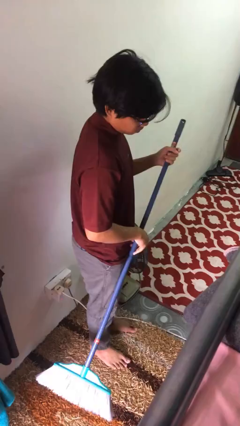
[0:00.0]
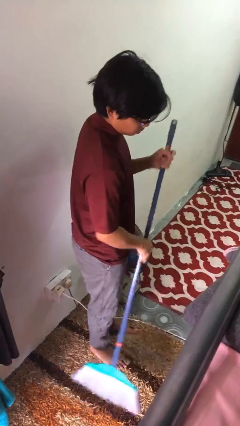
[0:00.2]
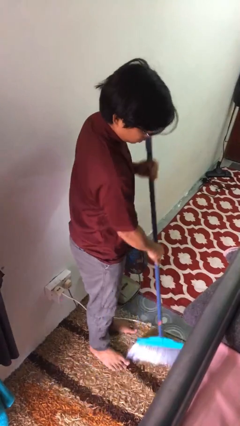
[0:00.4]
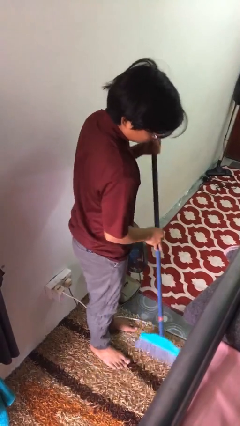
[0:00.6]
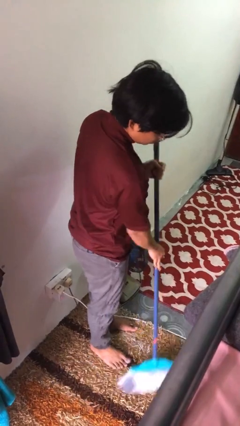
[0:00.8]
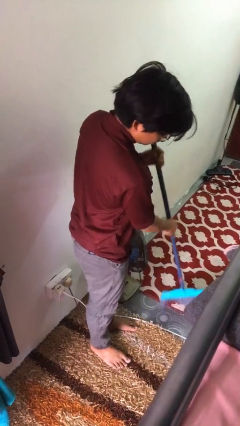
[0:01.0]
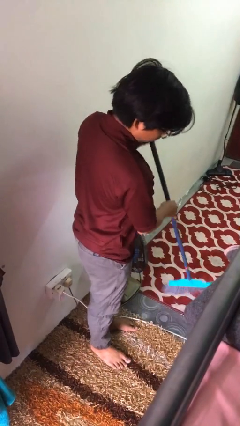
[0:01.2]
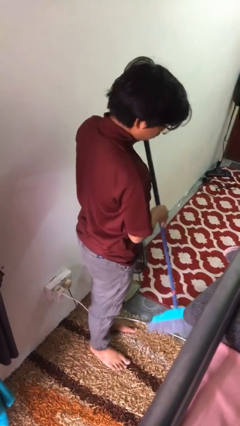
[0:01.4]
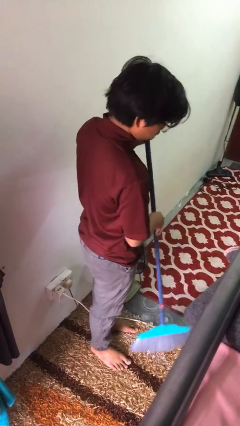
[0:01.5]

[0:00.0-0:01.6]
person sweeps floor

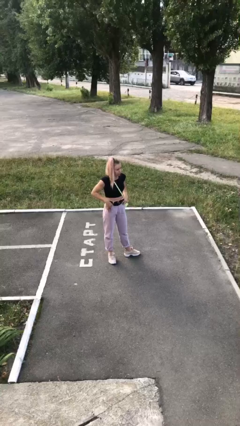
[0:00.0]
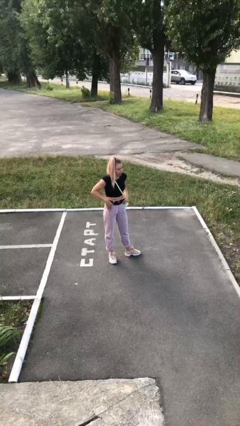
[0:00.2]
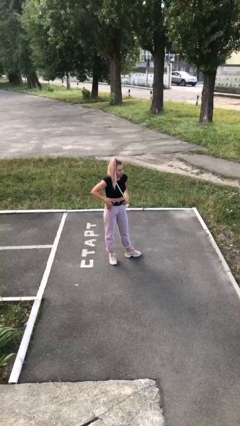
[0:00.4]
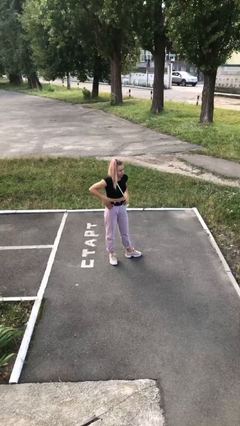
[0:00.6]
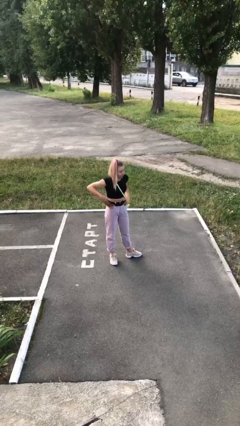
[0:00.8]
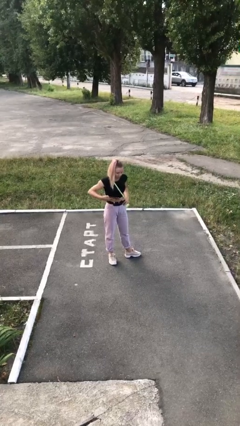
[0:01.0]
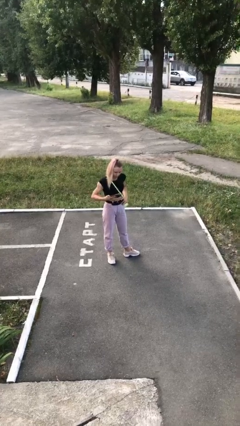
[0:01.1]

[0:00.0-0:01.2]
person takes phone from pocket

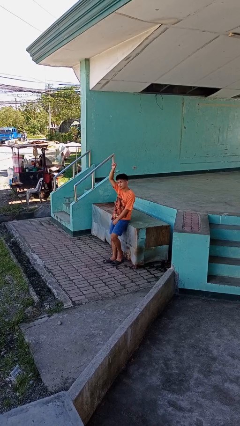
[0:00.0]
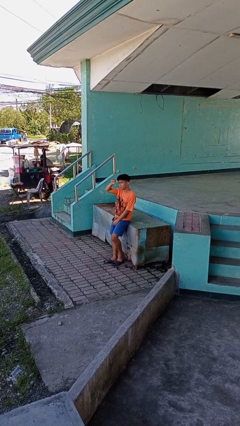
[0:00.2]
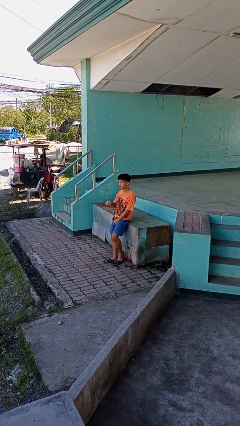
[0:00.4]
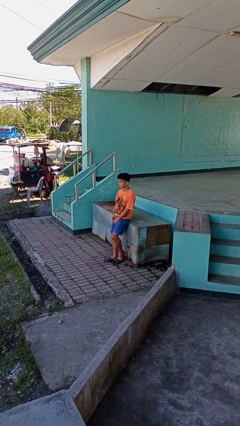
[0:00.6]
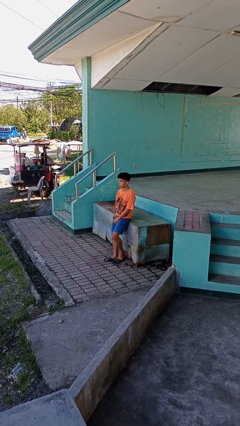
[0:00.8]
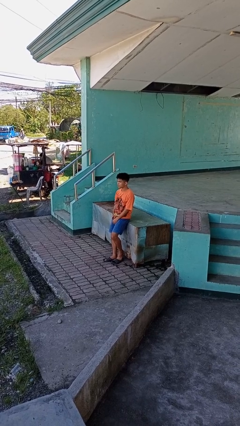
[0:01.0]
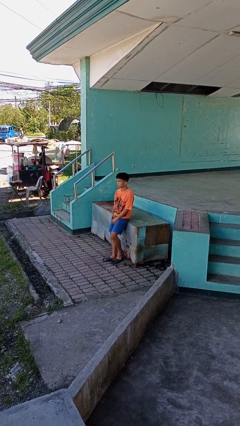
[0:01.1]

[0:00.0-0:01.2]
person gestures lower hand

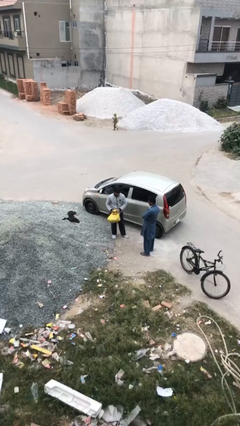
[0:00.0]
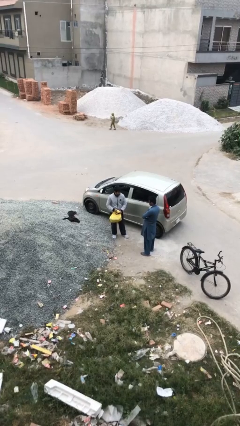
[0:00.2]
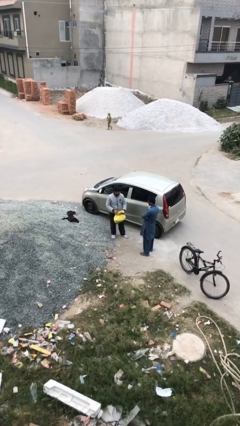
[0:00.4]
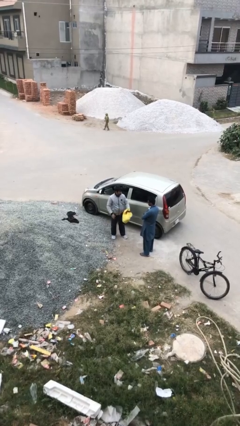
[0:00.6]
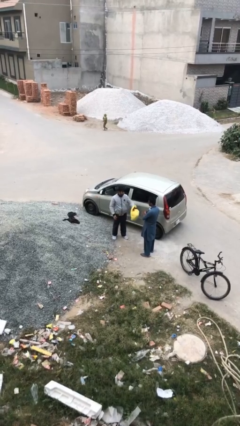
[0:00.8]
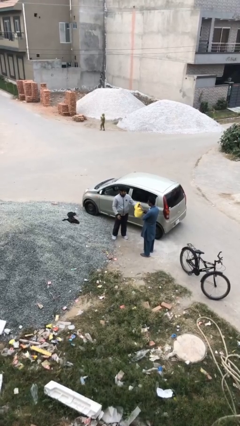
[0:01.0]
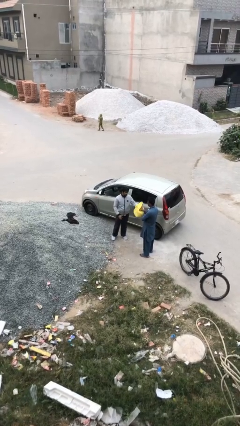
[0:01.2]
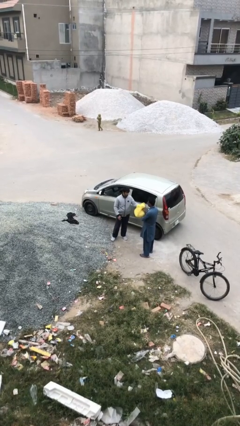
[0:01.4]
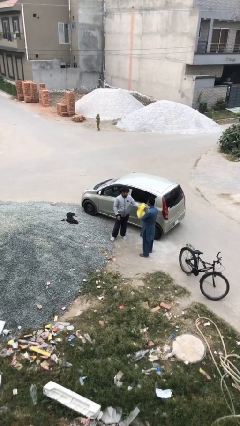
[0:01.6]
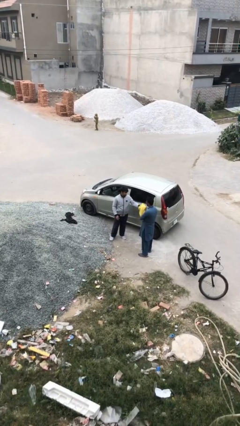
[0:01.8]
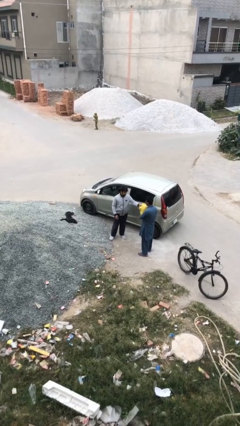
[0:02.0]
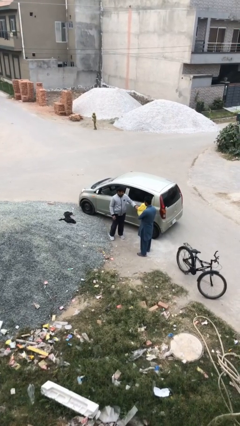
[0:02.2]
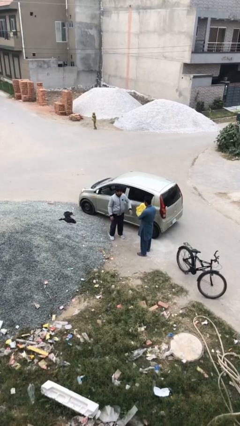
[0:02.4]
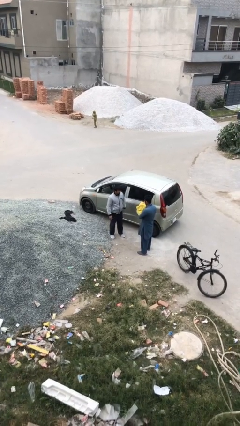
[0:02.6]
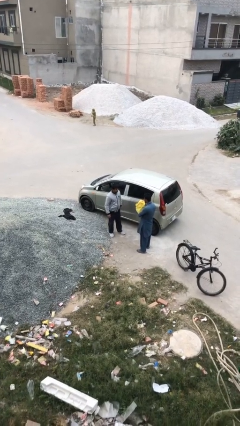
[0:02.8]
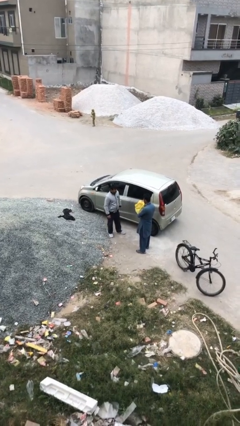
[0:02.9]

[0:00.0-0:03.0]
person transfers object to person

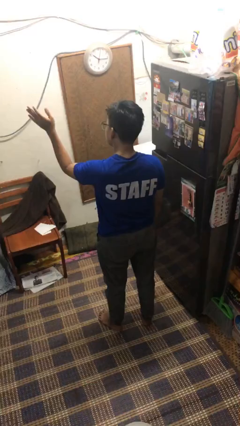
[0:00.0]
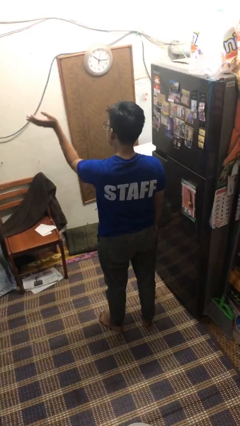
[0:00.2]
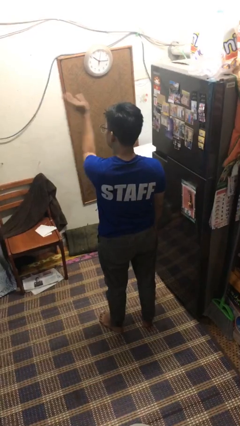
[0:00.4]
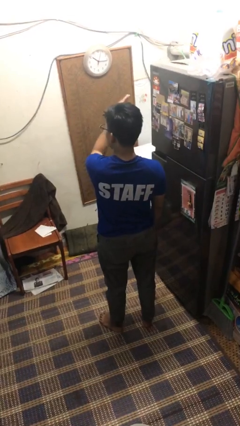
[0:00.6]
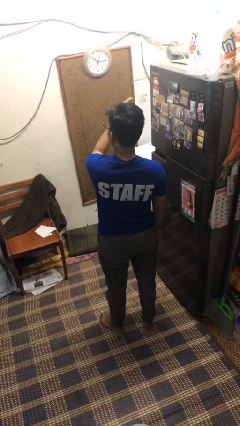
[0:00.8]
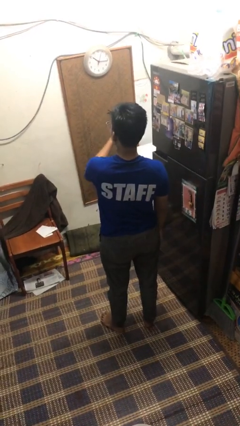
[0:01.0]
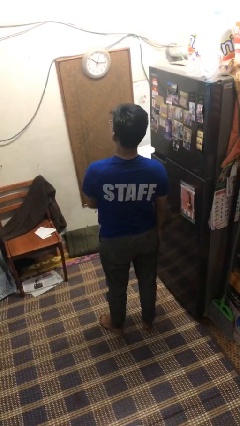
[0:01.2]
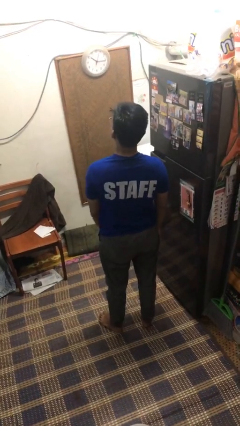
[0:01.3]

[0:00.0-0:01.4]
person gestures swipe right

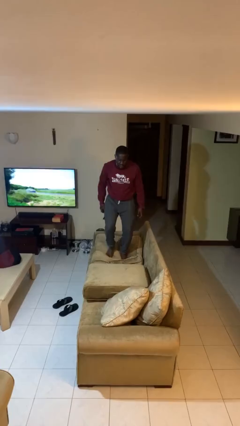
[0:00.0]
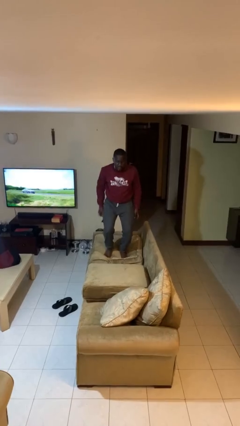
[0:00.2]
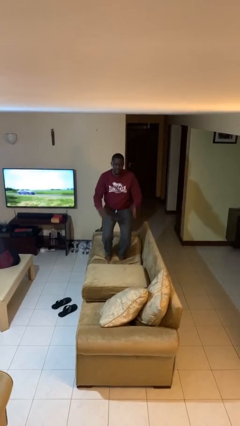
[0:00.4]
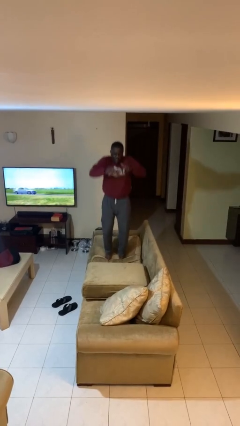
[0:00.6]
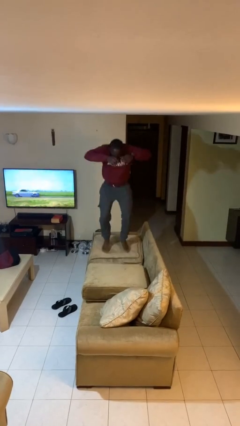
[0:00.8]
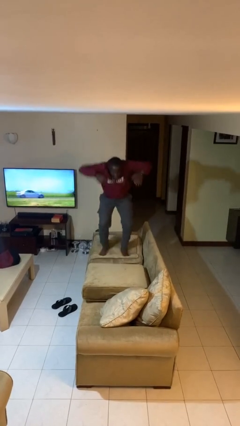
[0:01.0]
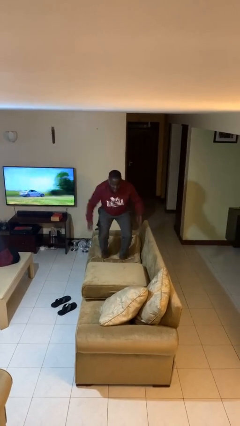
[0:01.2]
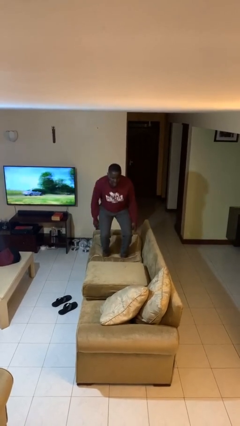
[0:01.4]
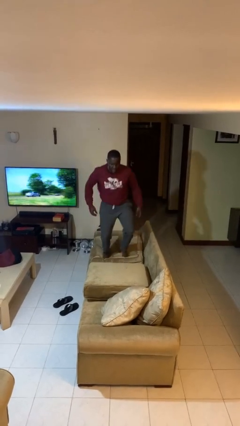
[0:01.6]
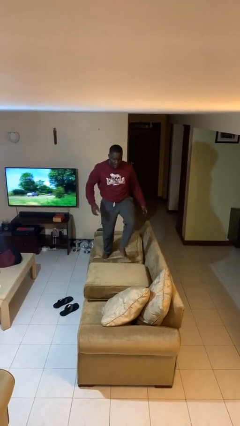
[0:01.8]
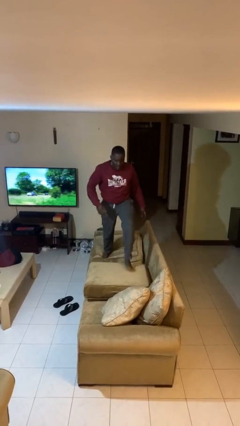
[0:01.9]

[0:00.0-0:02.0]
person jumps on couch

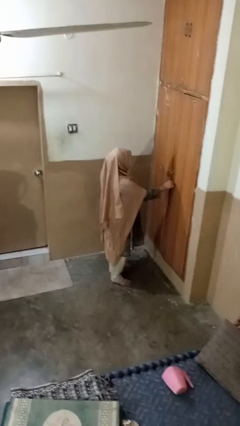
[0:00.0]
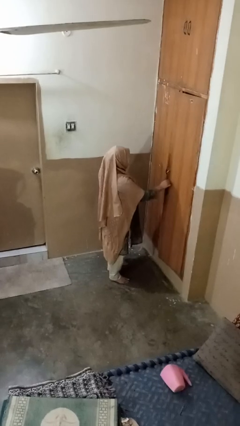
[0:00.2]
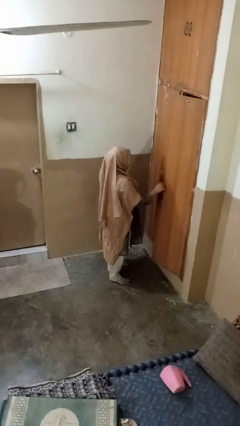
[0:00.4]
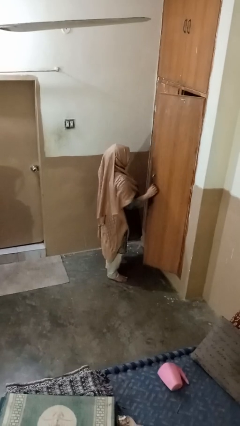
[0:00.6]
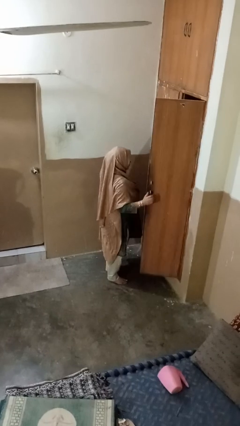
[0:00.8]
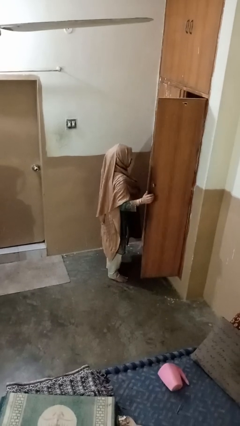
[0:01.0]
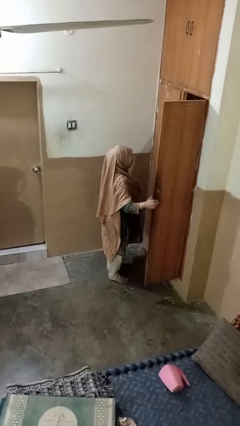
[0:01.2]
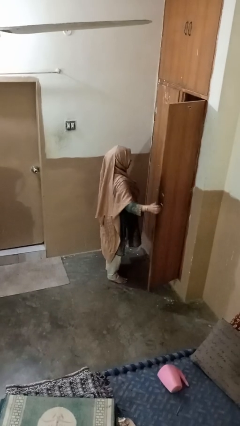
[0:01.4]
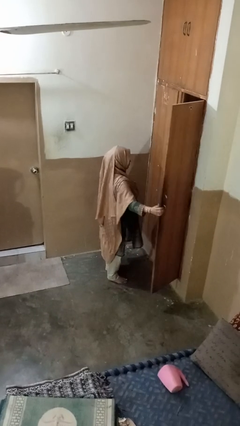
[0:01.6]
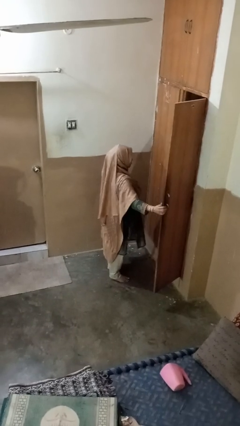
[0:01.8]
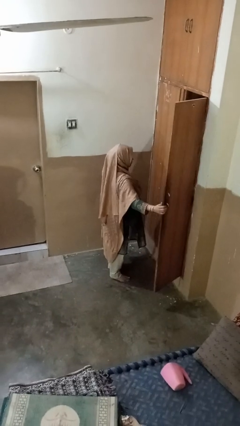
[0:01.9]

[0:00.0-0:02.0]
person opens closet door

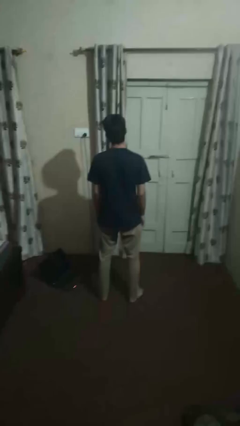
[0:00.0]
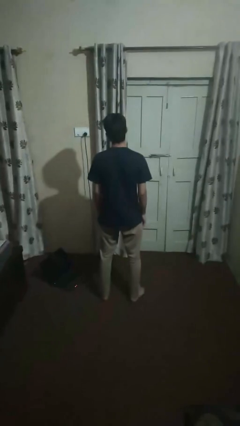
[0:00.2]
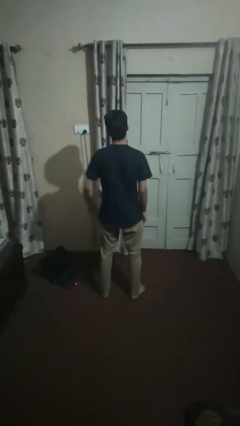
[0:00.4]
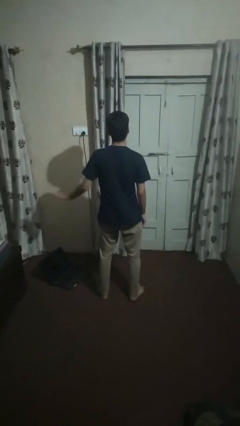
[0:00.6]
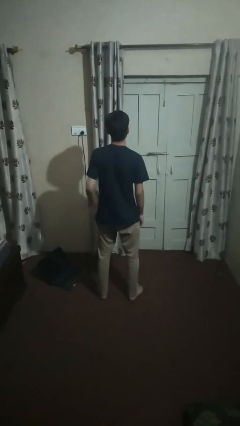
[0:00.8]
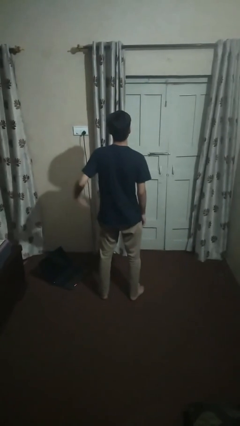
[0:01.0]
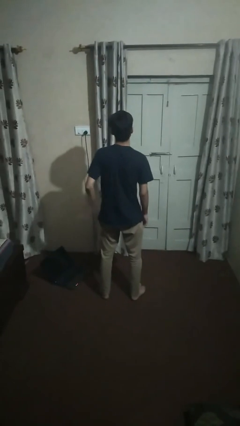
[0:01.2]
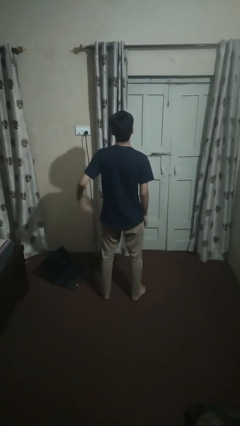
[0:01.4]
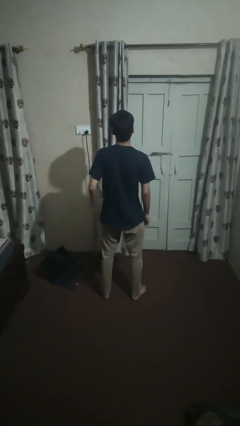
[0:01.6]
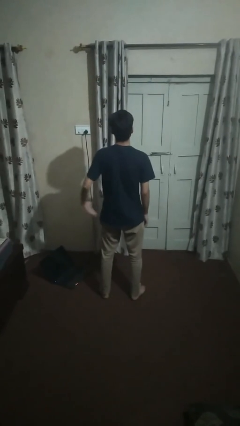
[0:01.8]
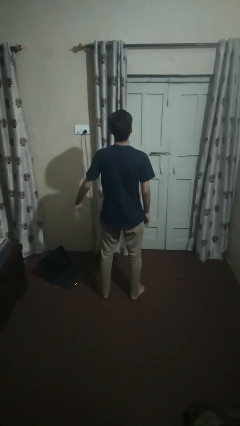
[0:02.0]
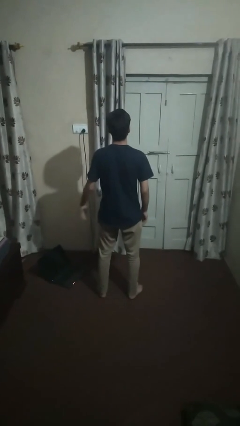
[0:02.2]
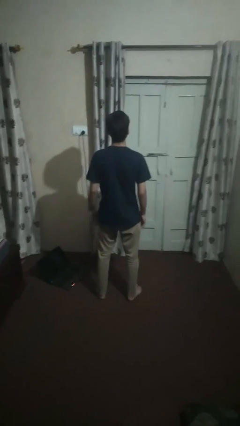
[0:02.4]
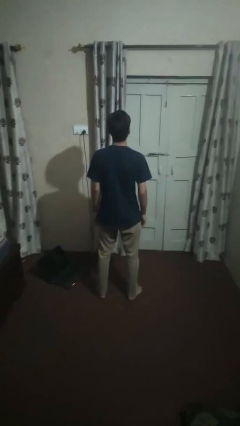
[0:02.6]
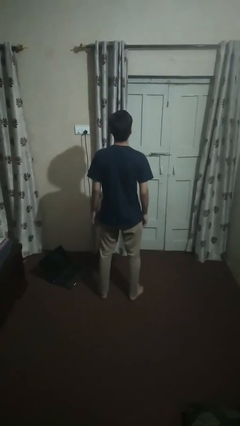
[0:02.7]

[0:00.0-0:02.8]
person slaps hands on thighs

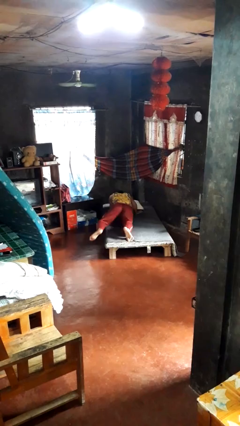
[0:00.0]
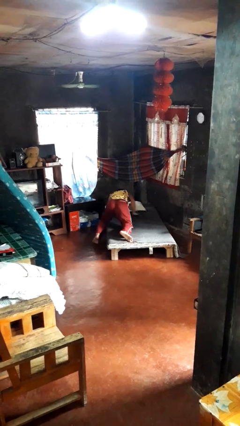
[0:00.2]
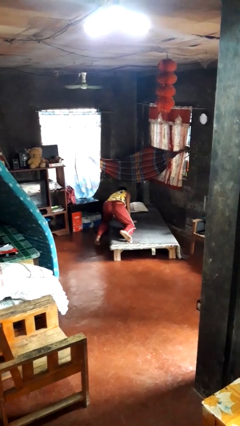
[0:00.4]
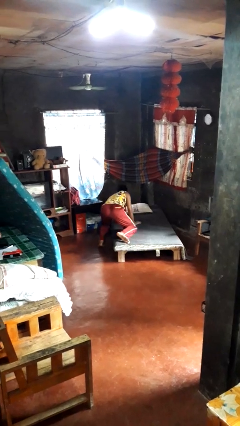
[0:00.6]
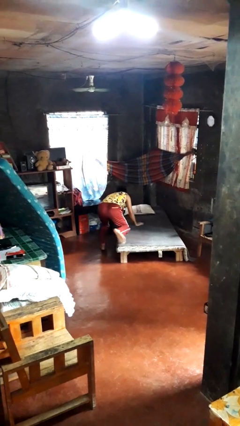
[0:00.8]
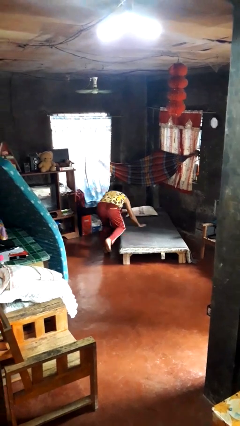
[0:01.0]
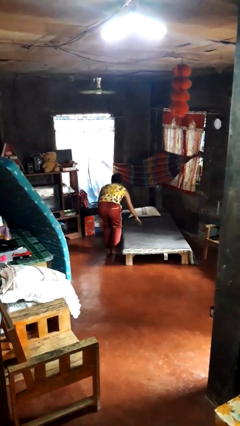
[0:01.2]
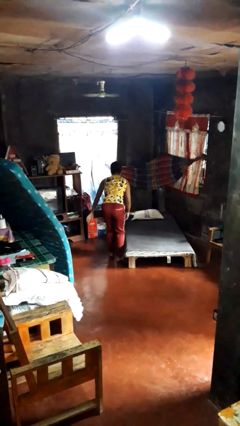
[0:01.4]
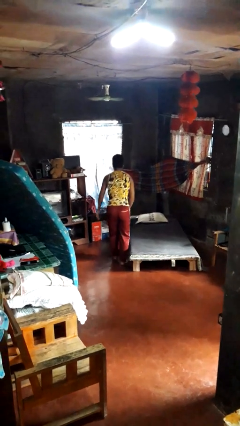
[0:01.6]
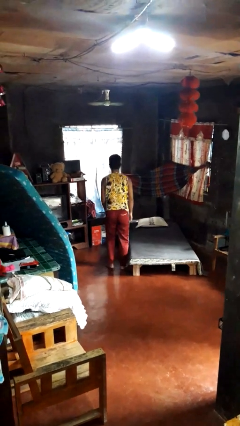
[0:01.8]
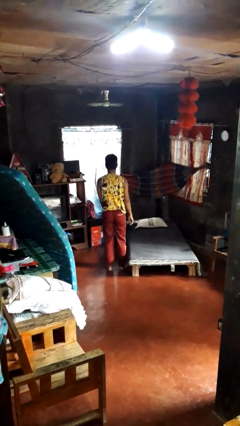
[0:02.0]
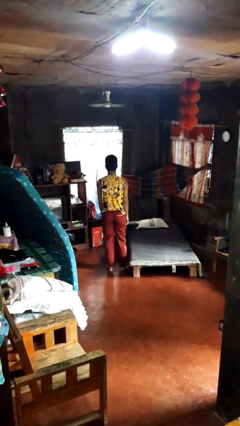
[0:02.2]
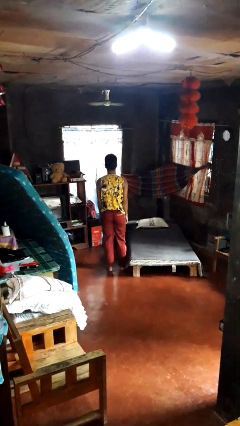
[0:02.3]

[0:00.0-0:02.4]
person stands up
